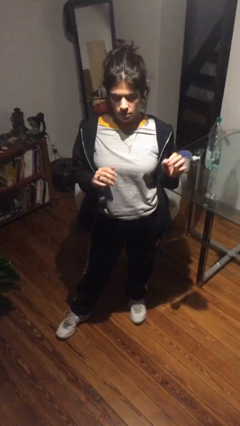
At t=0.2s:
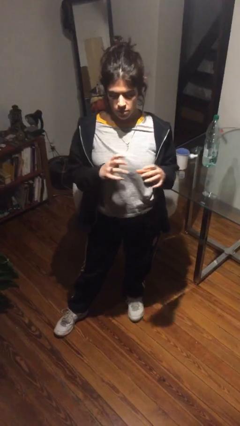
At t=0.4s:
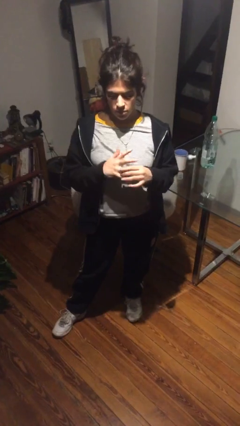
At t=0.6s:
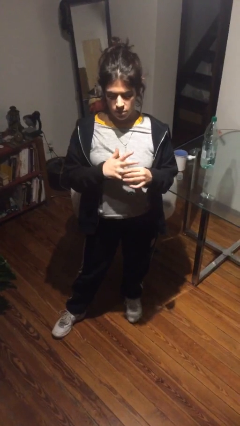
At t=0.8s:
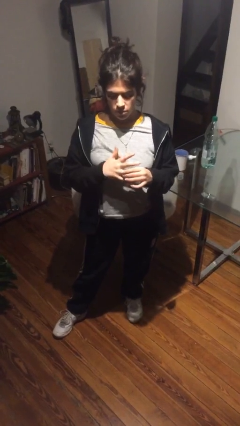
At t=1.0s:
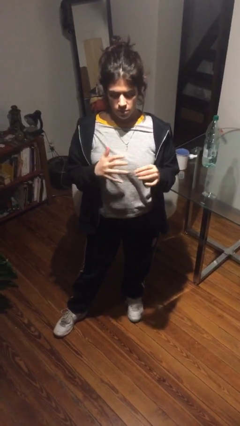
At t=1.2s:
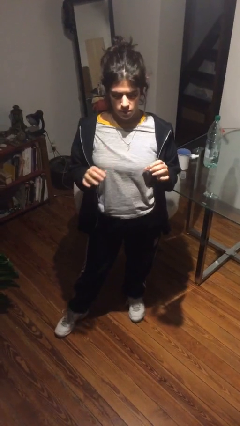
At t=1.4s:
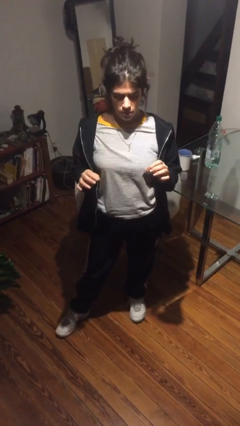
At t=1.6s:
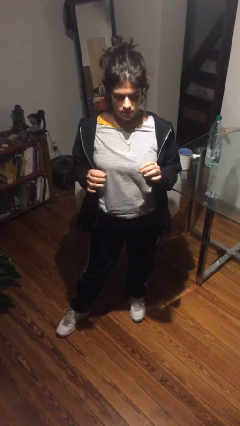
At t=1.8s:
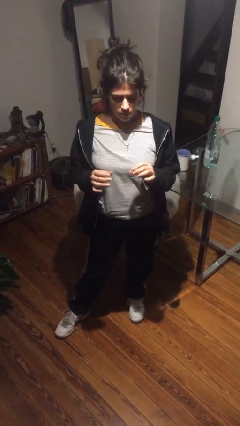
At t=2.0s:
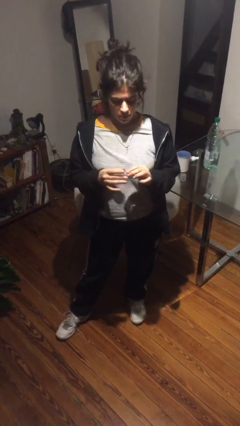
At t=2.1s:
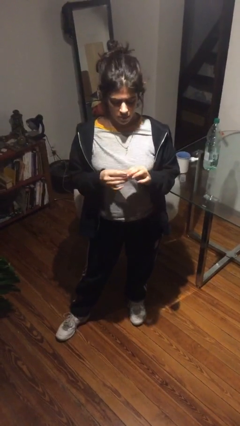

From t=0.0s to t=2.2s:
person takes off ring

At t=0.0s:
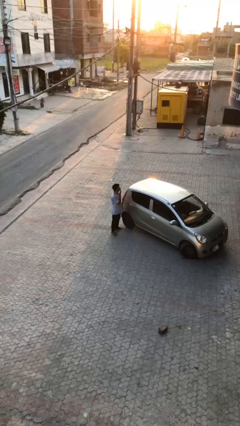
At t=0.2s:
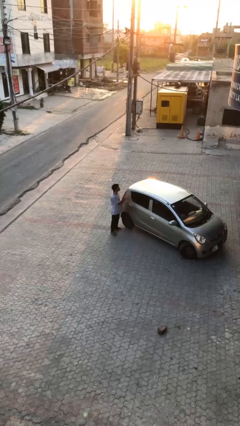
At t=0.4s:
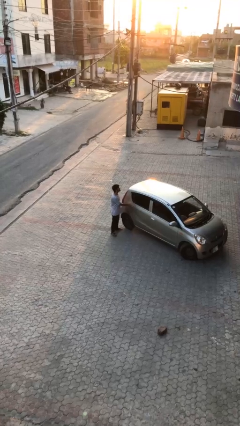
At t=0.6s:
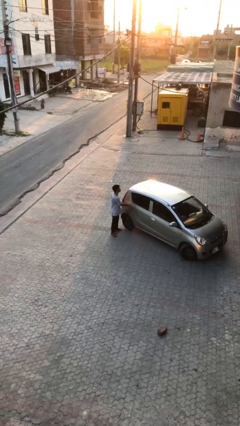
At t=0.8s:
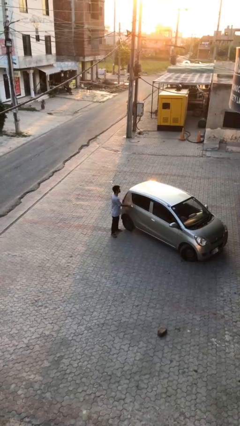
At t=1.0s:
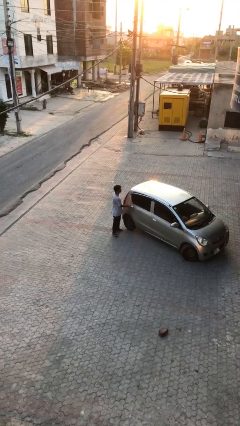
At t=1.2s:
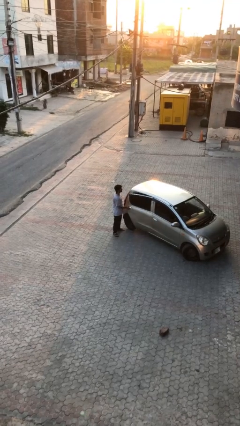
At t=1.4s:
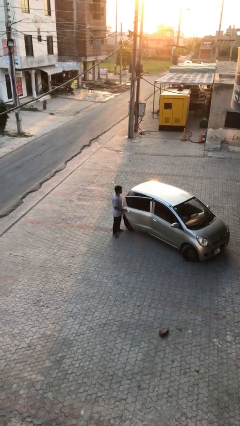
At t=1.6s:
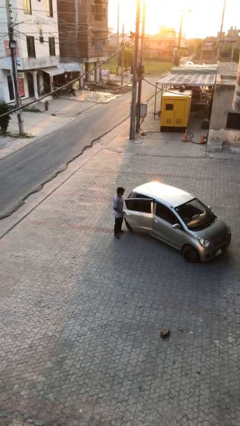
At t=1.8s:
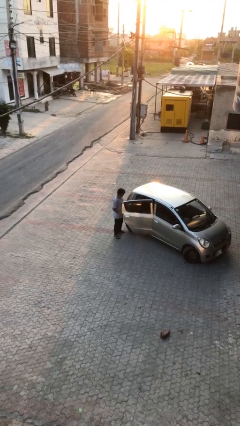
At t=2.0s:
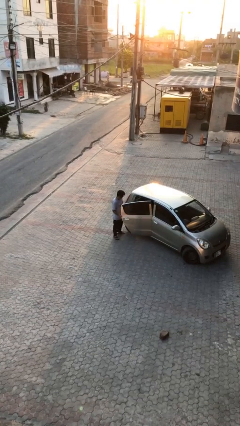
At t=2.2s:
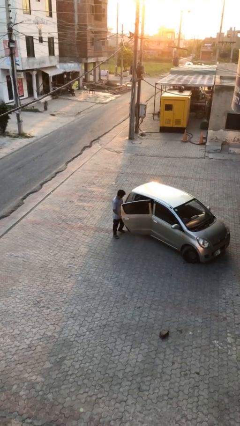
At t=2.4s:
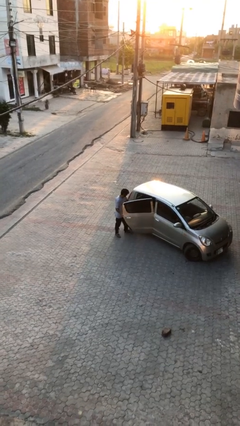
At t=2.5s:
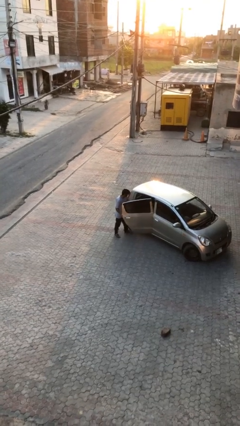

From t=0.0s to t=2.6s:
person opens car door

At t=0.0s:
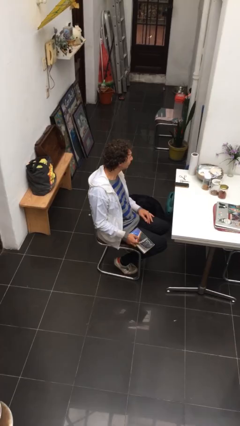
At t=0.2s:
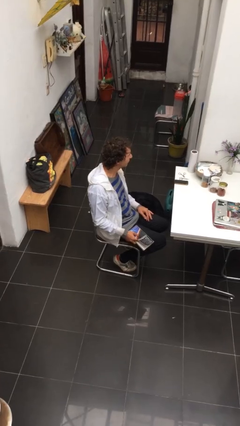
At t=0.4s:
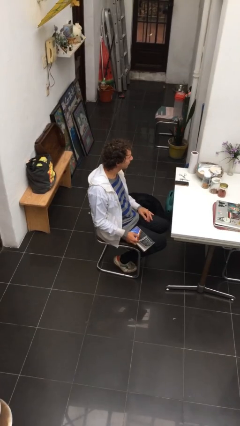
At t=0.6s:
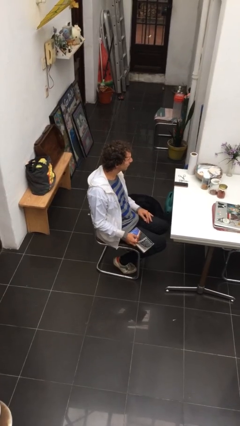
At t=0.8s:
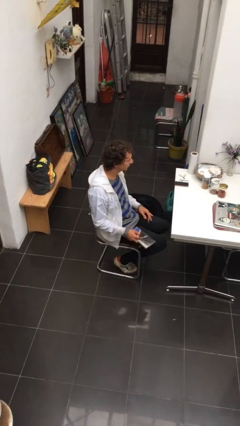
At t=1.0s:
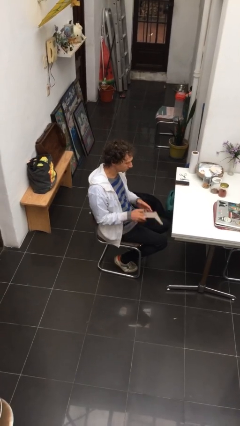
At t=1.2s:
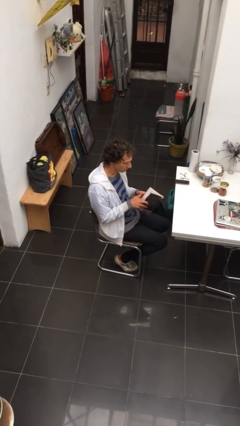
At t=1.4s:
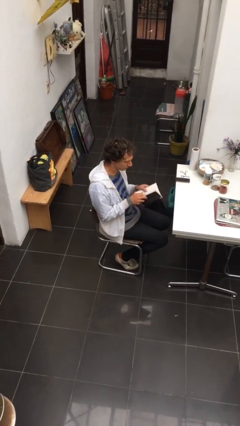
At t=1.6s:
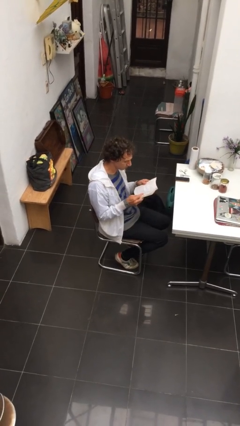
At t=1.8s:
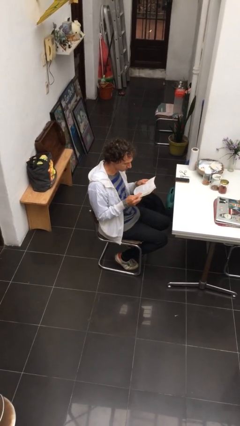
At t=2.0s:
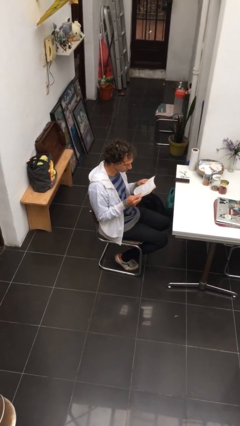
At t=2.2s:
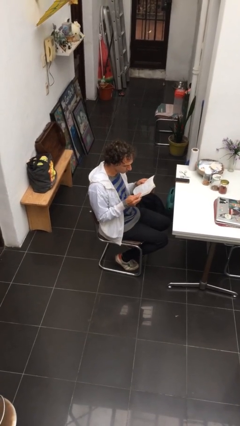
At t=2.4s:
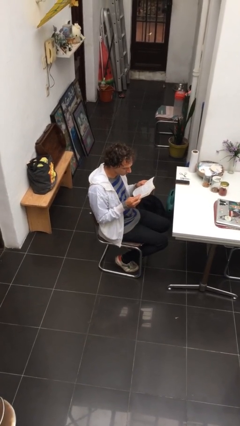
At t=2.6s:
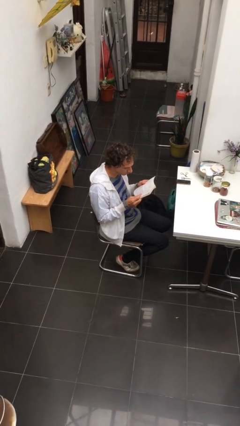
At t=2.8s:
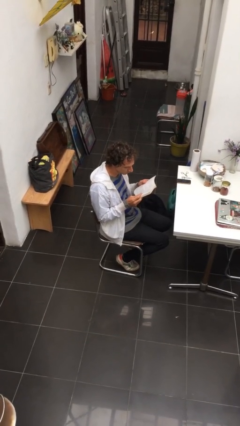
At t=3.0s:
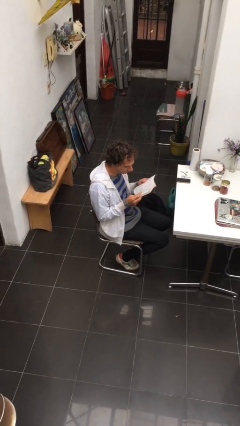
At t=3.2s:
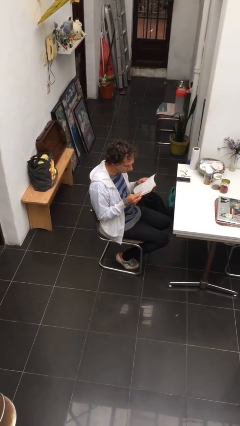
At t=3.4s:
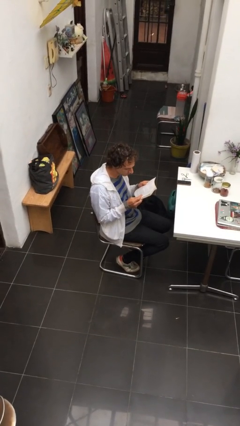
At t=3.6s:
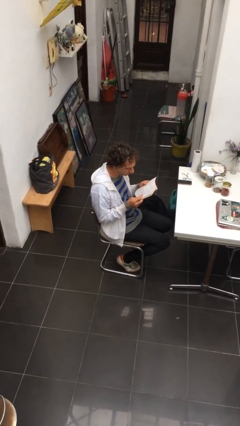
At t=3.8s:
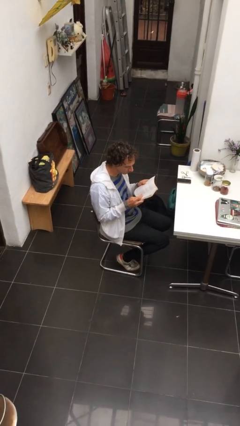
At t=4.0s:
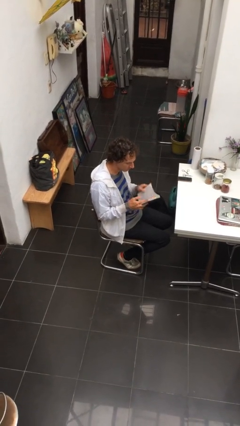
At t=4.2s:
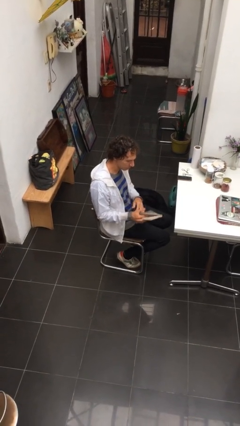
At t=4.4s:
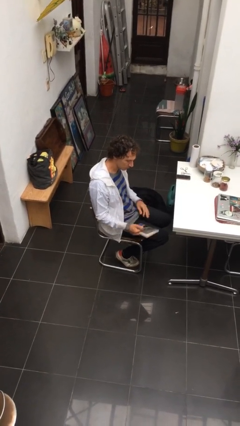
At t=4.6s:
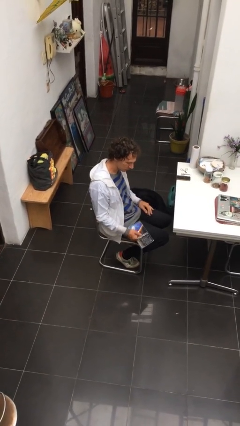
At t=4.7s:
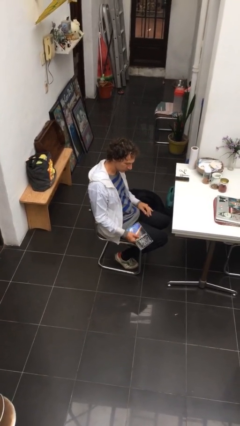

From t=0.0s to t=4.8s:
person reads document

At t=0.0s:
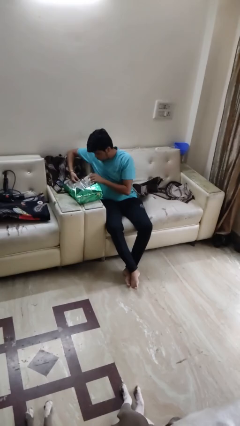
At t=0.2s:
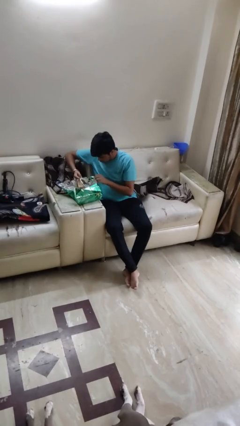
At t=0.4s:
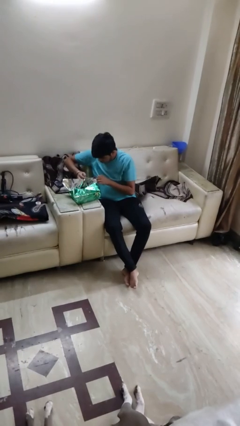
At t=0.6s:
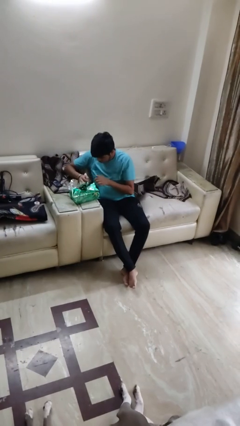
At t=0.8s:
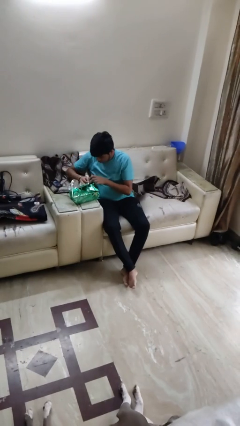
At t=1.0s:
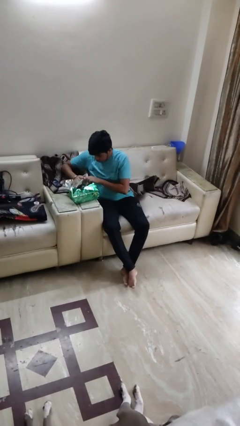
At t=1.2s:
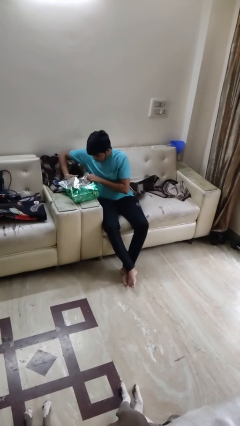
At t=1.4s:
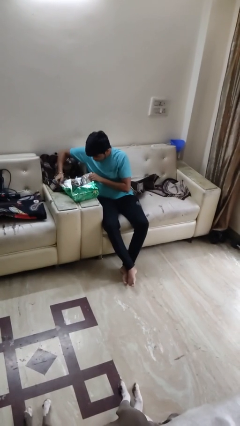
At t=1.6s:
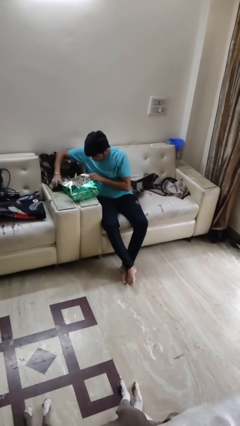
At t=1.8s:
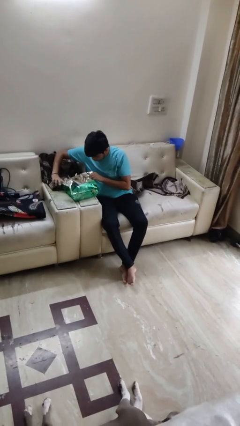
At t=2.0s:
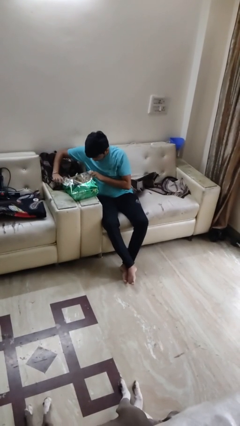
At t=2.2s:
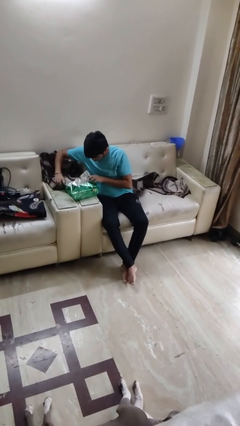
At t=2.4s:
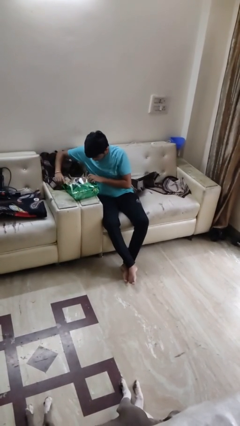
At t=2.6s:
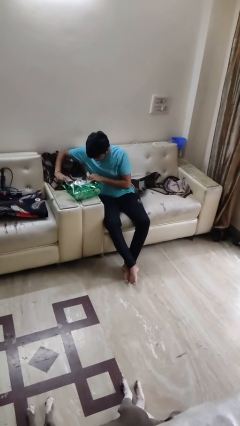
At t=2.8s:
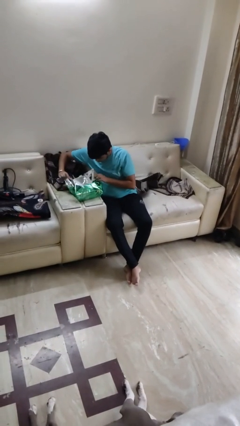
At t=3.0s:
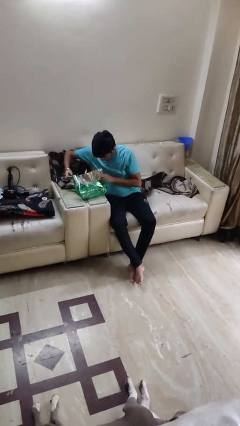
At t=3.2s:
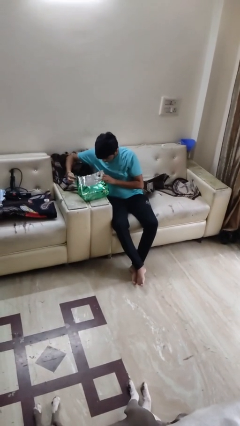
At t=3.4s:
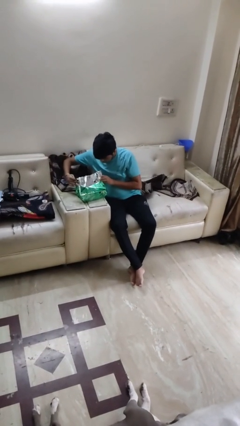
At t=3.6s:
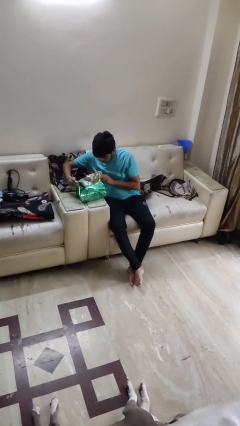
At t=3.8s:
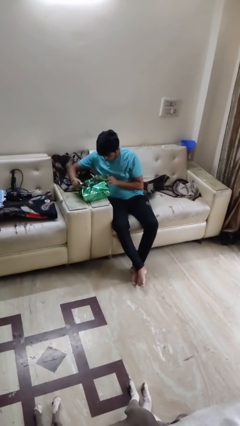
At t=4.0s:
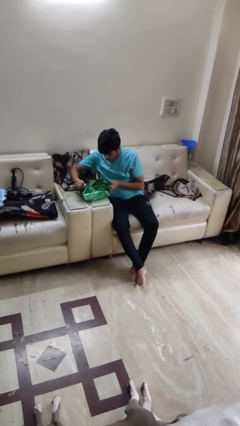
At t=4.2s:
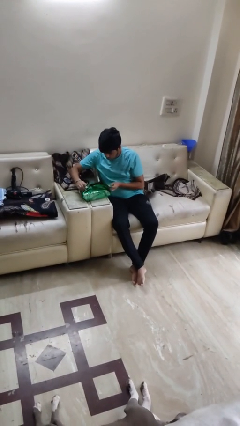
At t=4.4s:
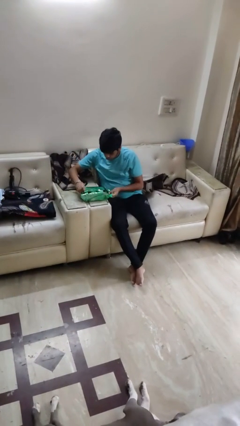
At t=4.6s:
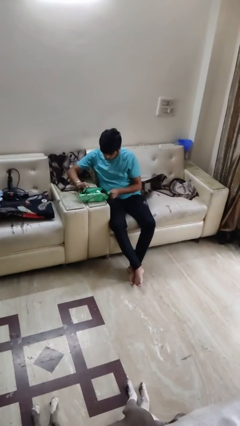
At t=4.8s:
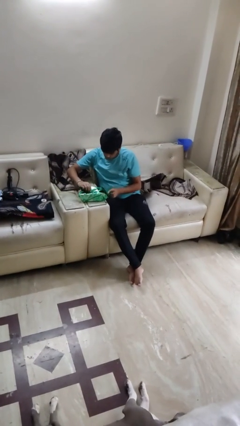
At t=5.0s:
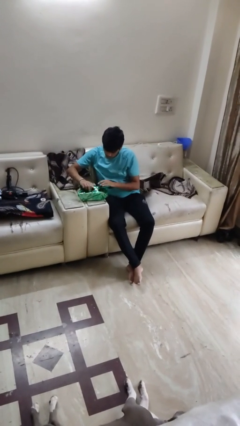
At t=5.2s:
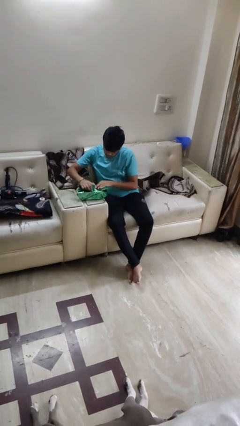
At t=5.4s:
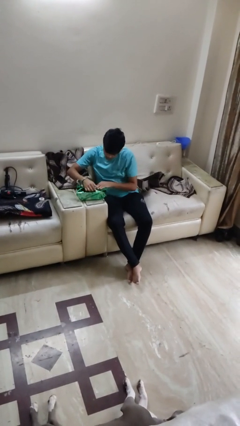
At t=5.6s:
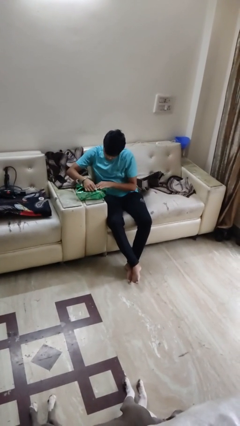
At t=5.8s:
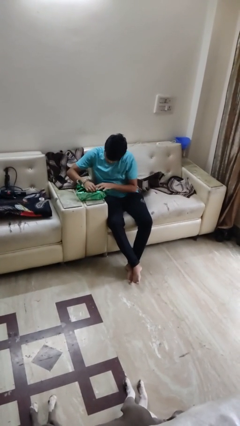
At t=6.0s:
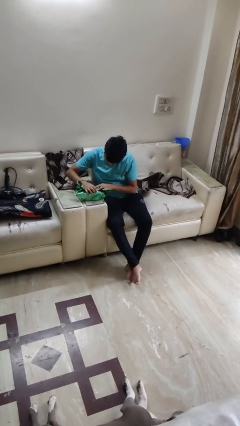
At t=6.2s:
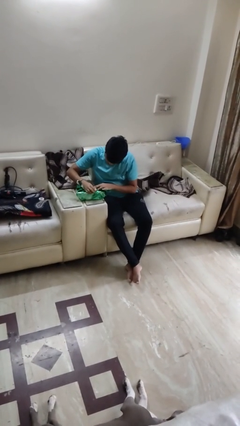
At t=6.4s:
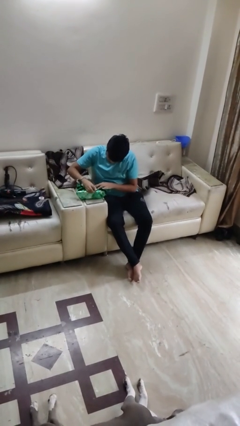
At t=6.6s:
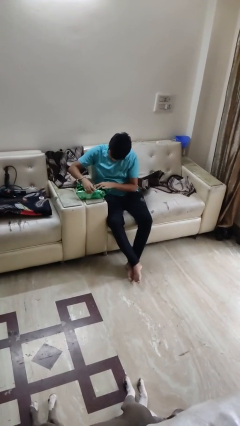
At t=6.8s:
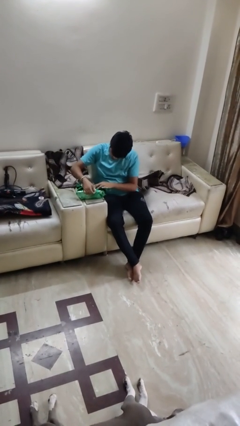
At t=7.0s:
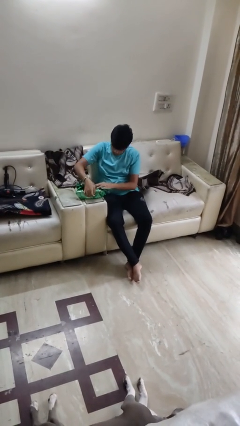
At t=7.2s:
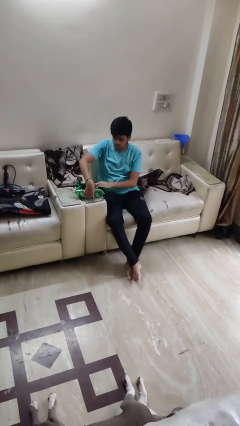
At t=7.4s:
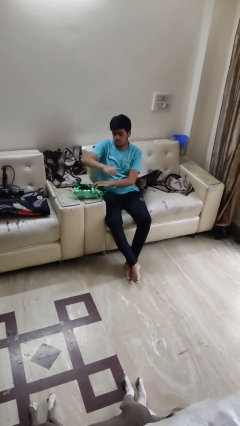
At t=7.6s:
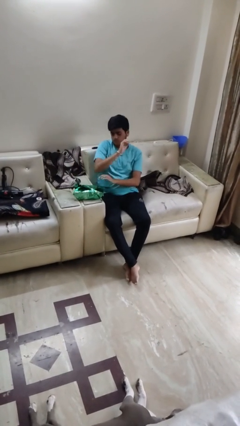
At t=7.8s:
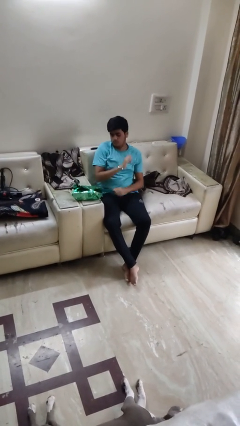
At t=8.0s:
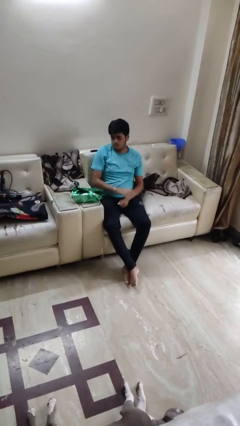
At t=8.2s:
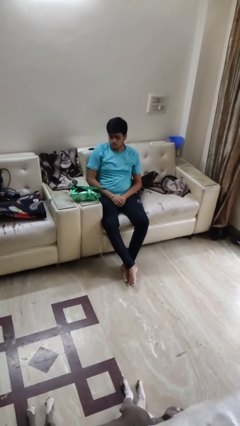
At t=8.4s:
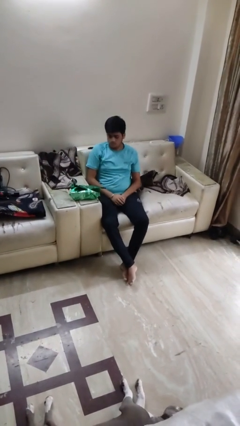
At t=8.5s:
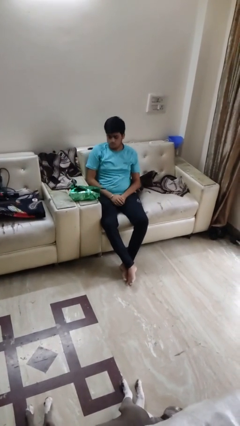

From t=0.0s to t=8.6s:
person wraps box
